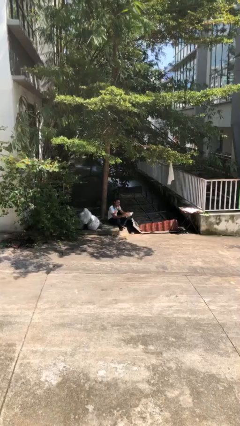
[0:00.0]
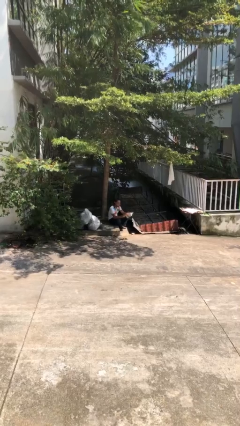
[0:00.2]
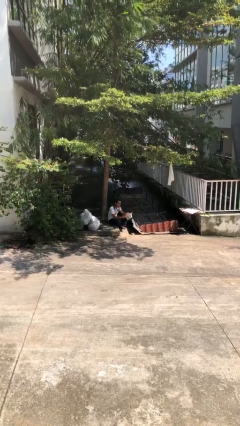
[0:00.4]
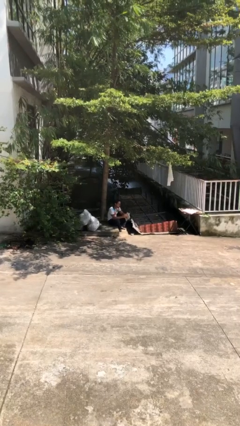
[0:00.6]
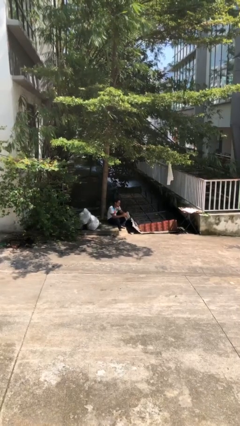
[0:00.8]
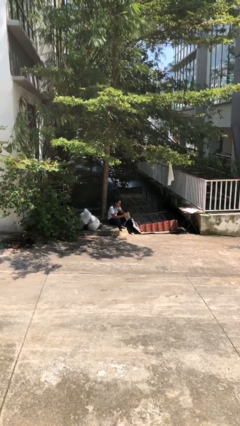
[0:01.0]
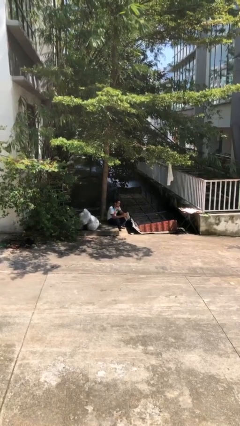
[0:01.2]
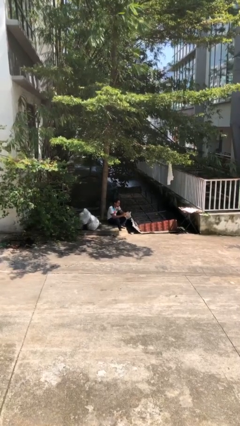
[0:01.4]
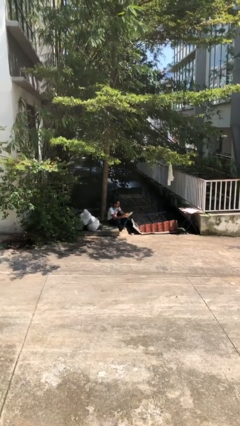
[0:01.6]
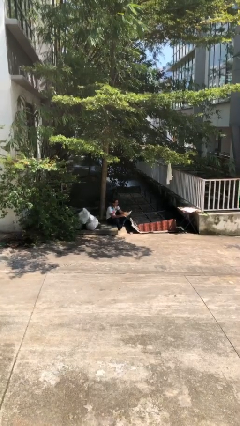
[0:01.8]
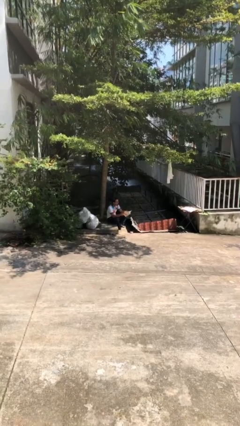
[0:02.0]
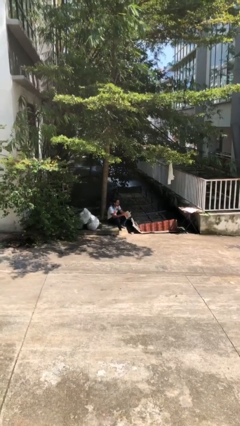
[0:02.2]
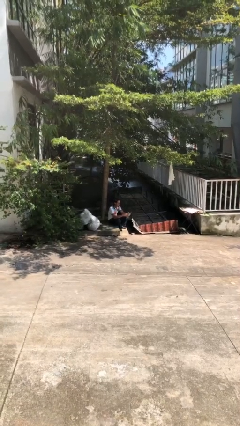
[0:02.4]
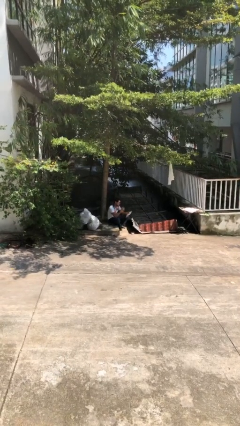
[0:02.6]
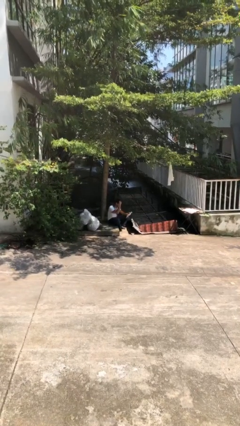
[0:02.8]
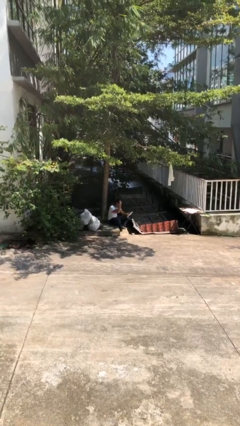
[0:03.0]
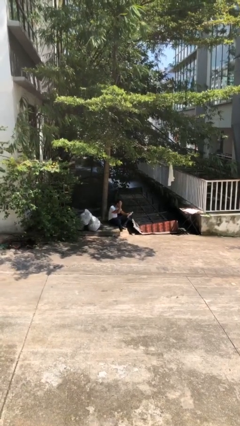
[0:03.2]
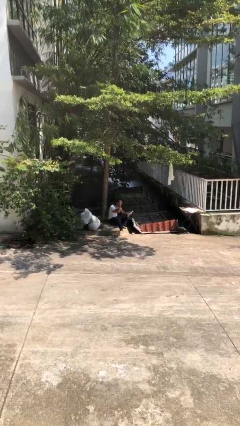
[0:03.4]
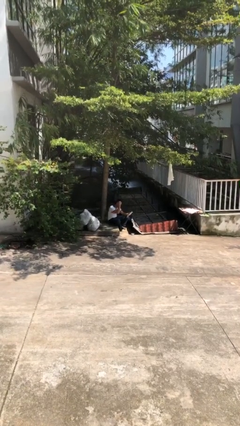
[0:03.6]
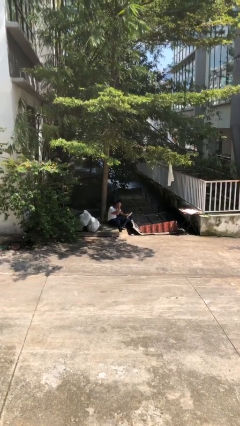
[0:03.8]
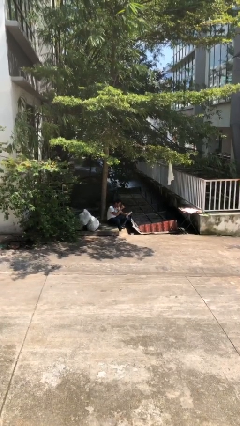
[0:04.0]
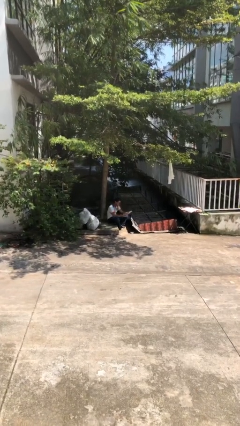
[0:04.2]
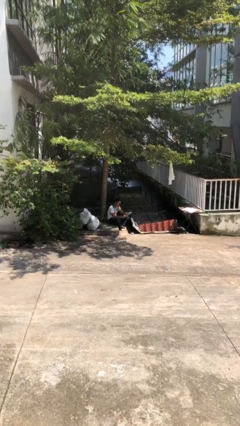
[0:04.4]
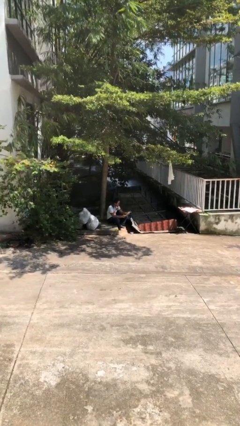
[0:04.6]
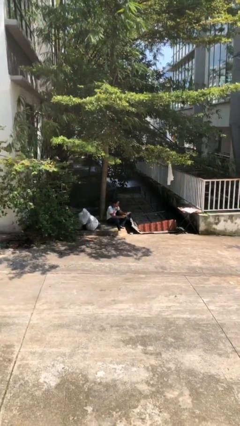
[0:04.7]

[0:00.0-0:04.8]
person reads document

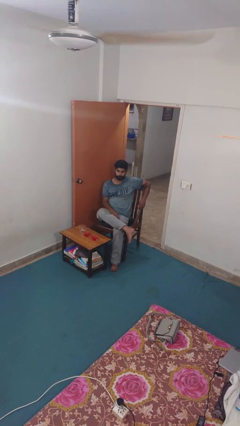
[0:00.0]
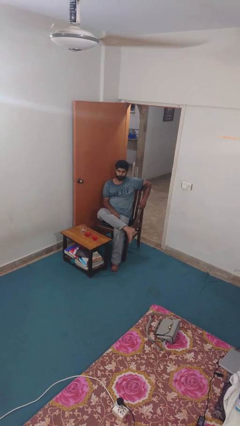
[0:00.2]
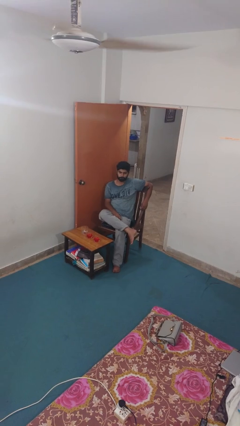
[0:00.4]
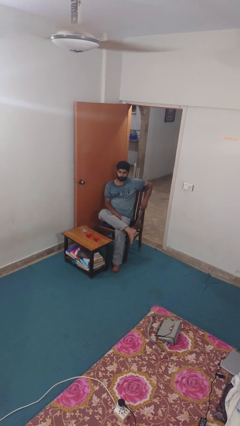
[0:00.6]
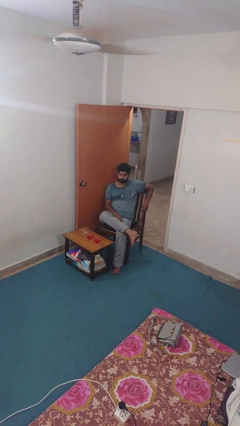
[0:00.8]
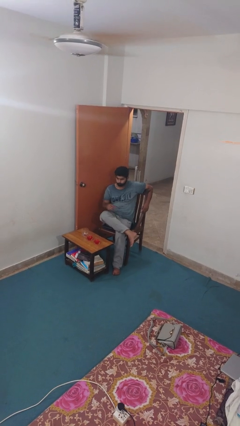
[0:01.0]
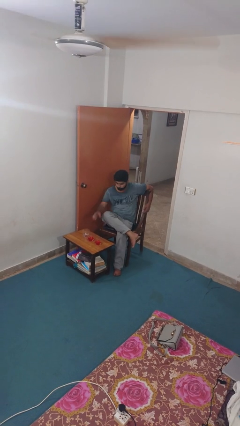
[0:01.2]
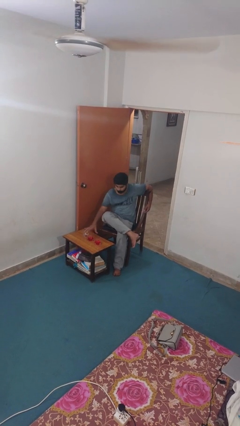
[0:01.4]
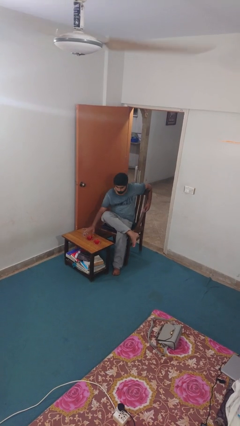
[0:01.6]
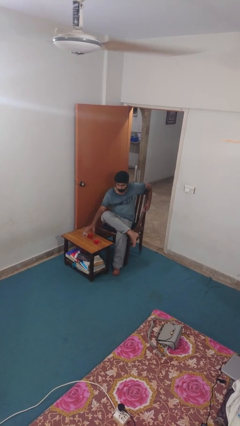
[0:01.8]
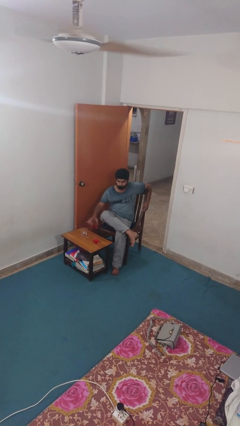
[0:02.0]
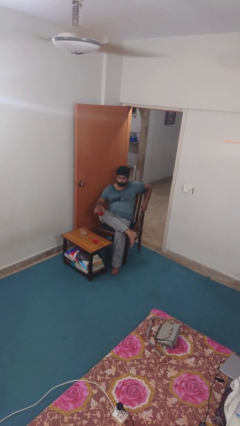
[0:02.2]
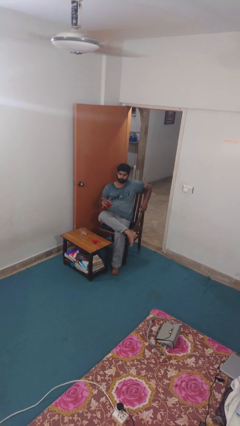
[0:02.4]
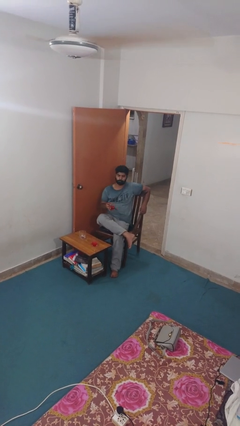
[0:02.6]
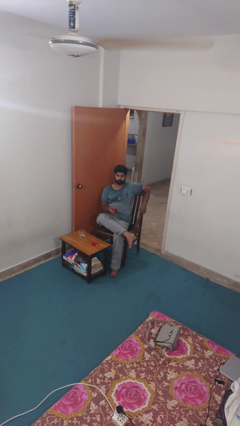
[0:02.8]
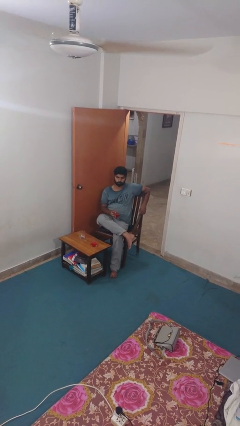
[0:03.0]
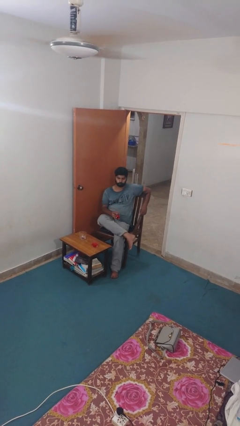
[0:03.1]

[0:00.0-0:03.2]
person picks up object from table

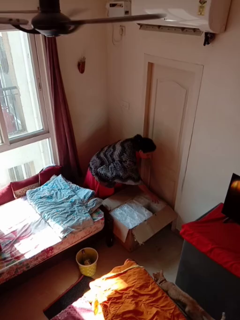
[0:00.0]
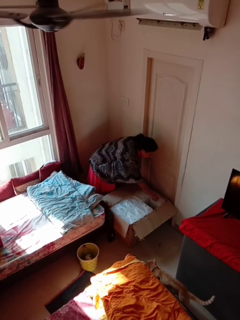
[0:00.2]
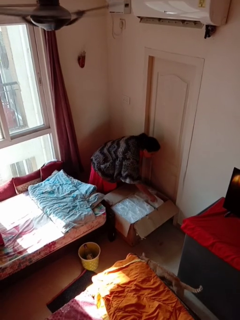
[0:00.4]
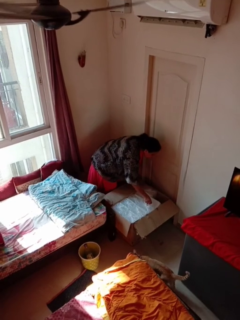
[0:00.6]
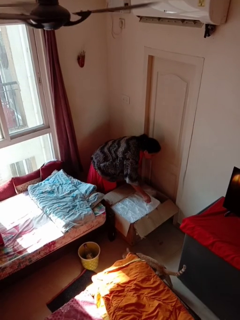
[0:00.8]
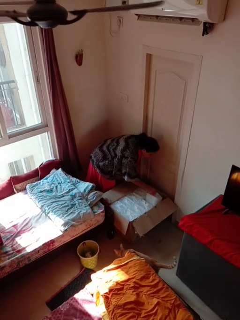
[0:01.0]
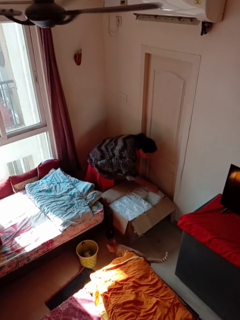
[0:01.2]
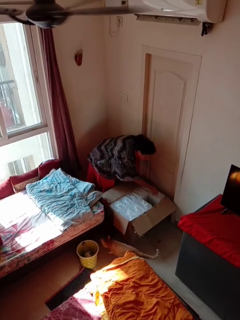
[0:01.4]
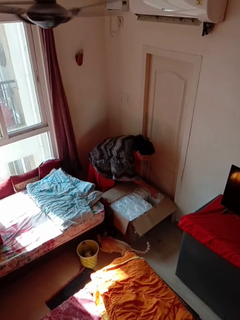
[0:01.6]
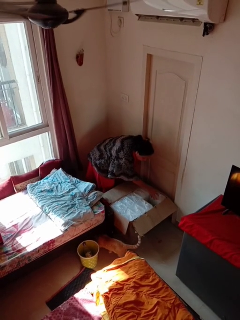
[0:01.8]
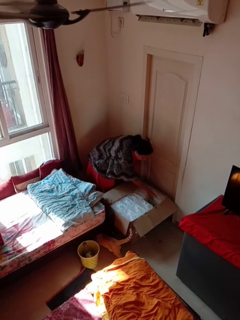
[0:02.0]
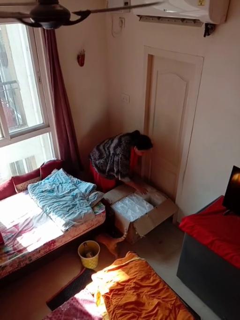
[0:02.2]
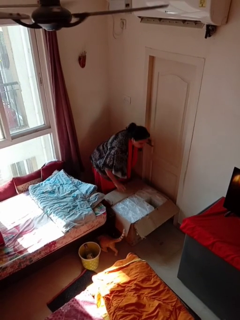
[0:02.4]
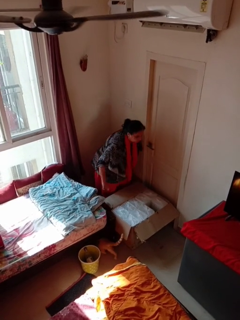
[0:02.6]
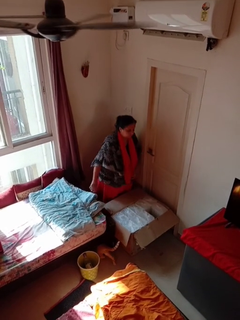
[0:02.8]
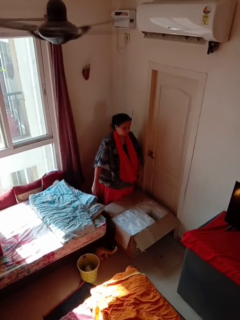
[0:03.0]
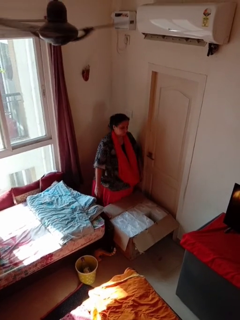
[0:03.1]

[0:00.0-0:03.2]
person searches in box

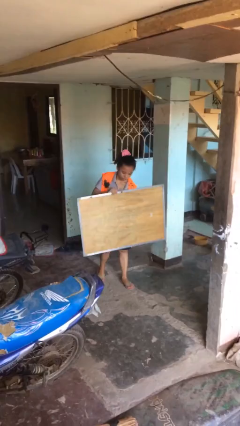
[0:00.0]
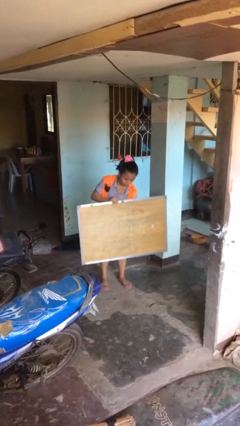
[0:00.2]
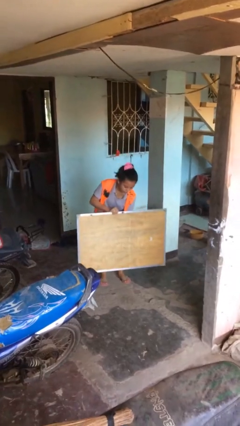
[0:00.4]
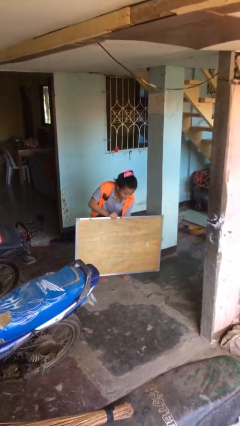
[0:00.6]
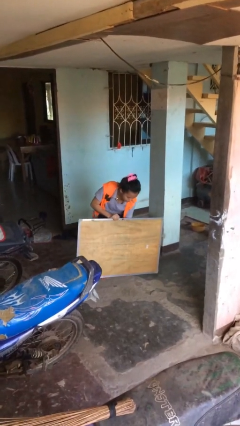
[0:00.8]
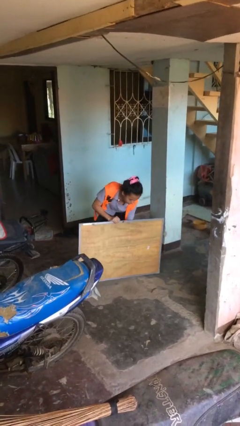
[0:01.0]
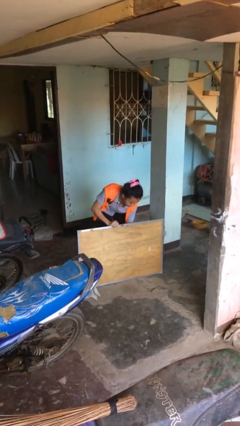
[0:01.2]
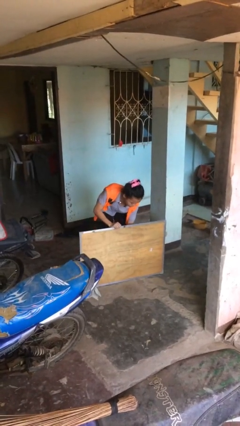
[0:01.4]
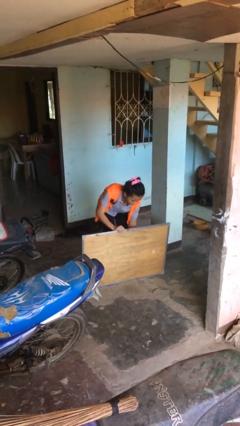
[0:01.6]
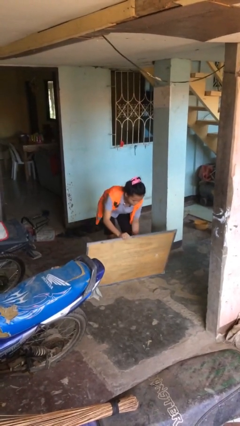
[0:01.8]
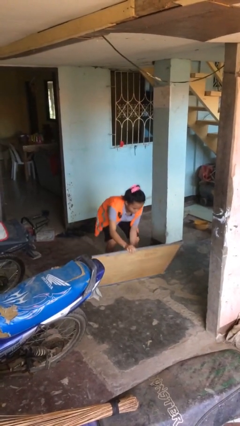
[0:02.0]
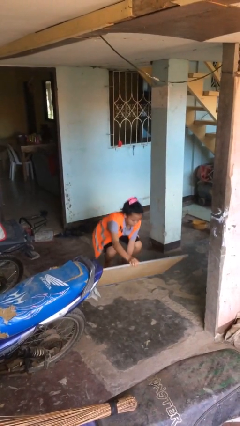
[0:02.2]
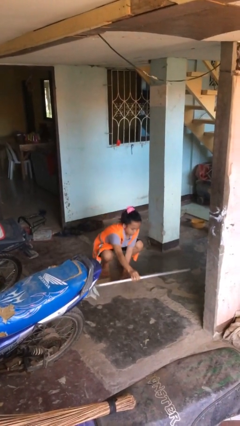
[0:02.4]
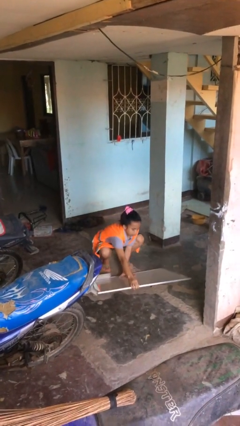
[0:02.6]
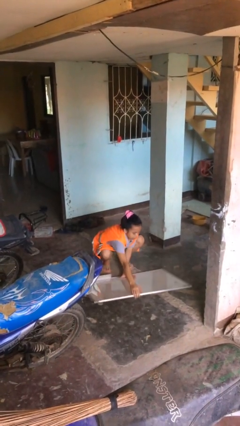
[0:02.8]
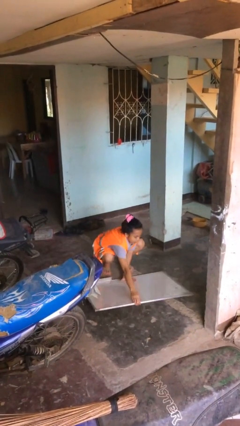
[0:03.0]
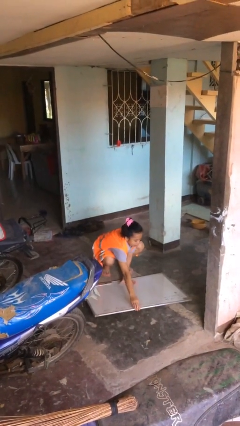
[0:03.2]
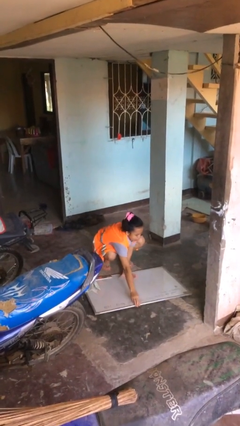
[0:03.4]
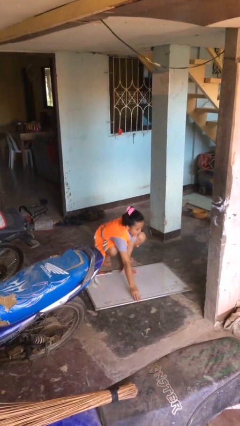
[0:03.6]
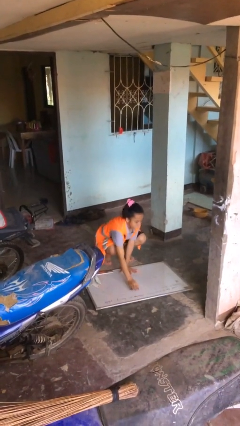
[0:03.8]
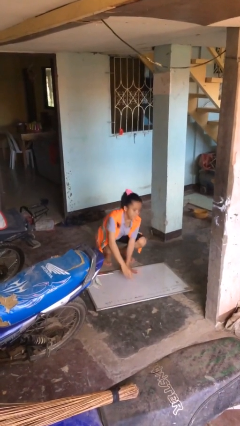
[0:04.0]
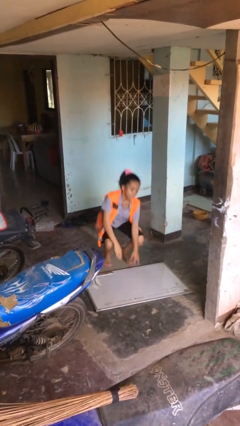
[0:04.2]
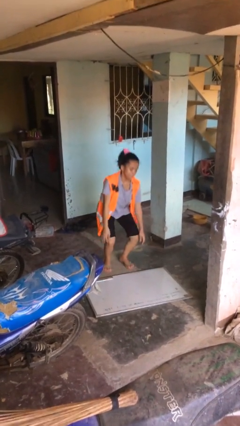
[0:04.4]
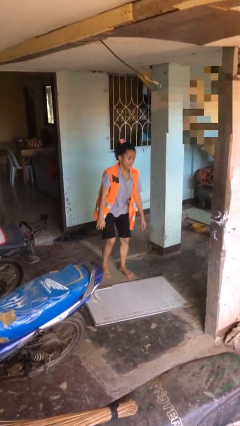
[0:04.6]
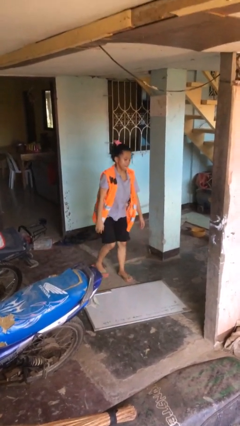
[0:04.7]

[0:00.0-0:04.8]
person puts down object on floor

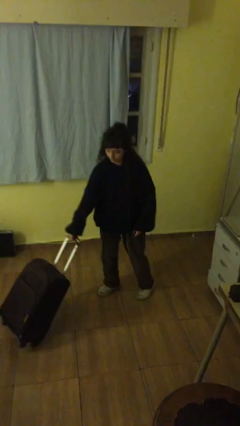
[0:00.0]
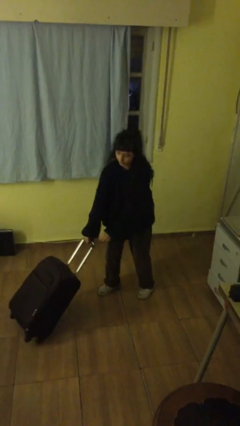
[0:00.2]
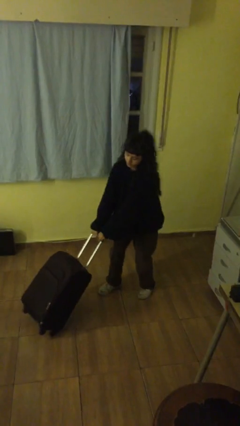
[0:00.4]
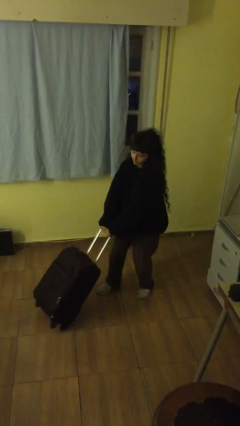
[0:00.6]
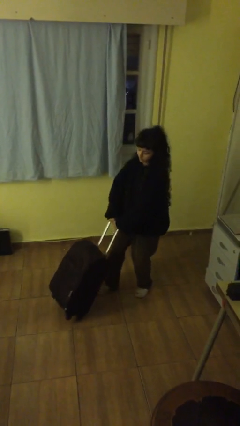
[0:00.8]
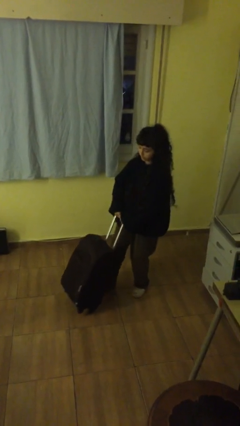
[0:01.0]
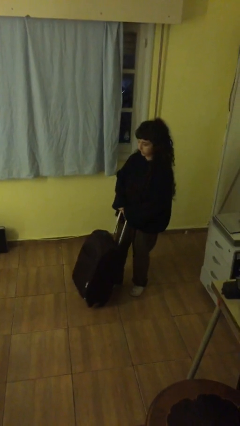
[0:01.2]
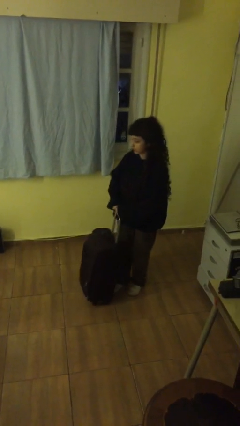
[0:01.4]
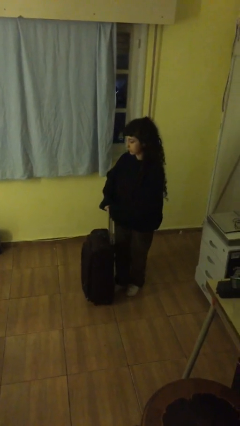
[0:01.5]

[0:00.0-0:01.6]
person pulls wheeled cart
